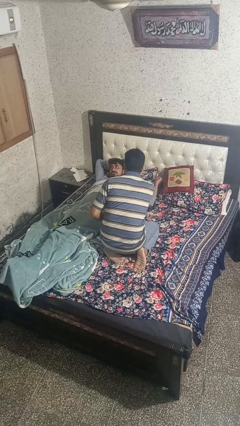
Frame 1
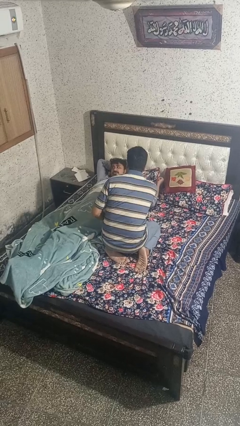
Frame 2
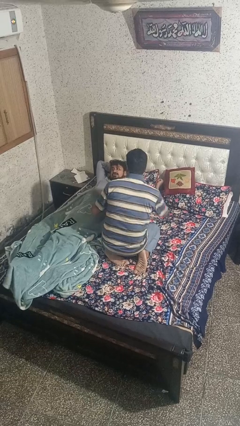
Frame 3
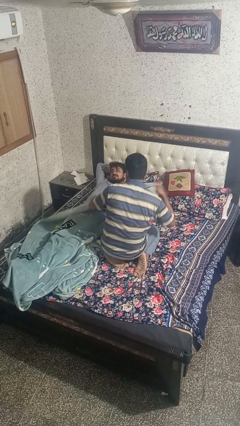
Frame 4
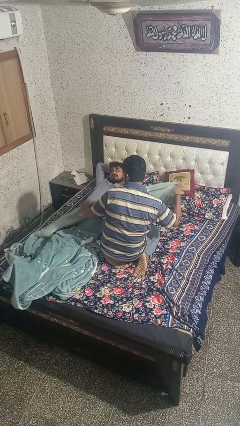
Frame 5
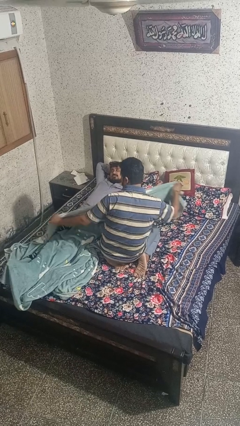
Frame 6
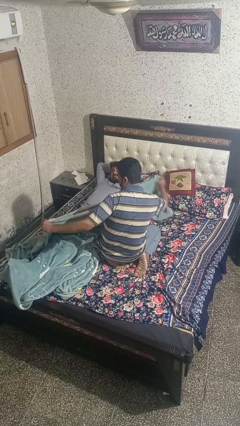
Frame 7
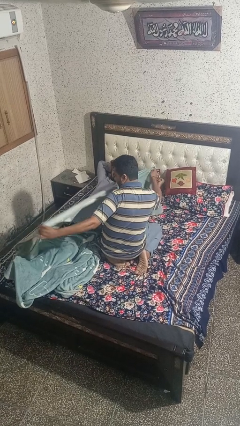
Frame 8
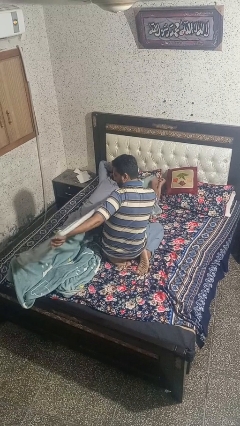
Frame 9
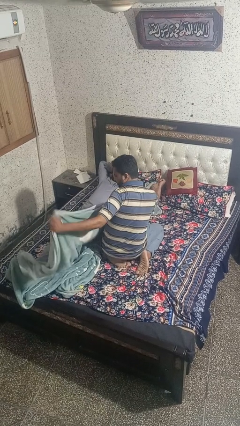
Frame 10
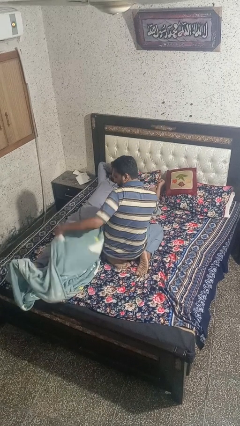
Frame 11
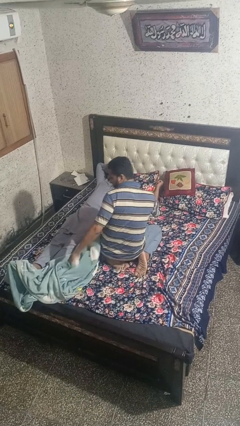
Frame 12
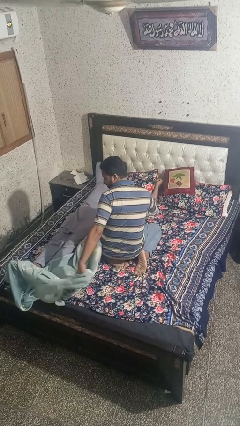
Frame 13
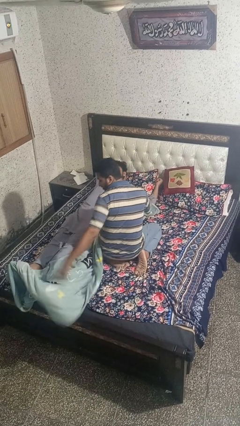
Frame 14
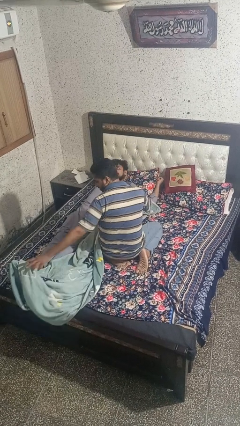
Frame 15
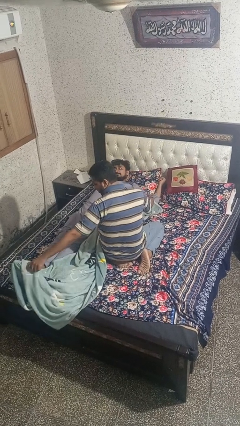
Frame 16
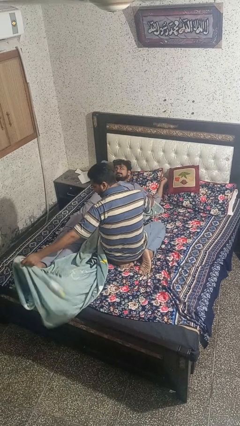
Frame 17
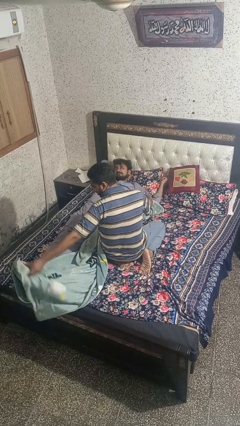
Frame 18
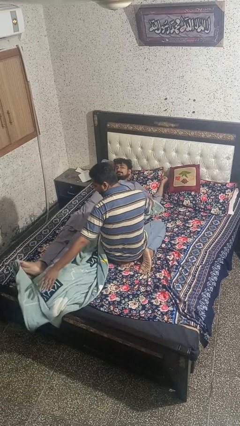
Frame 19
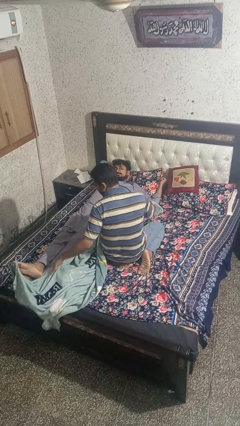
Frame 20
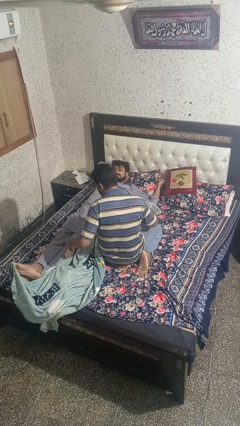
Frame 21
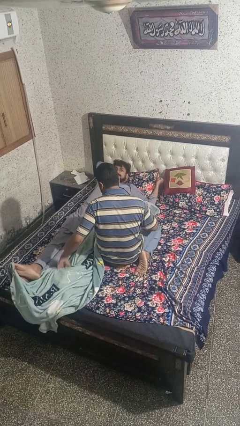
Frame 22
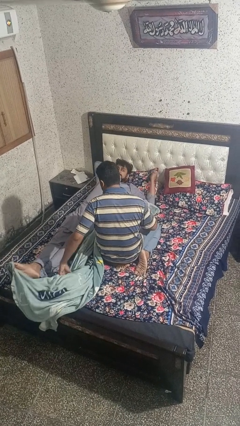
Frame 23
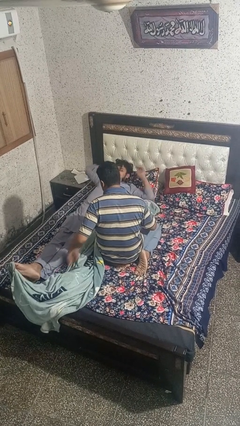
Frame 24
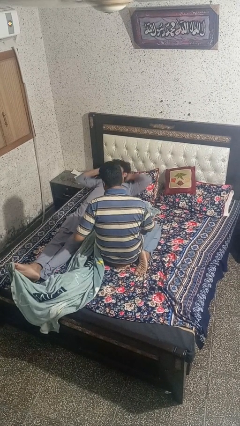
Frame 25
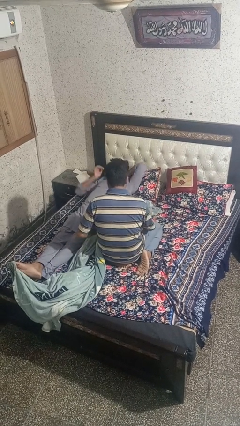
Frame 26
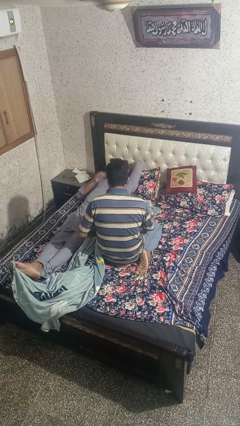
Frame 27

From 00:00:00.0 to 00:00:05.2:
person uncovers friend with blanket

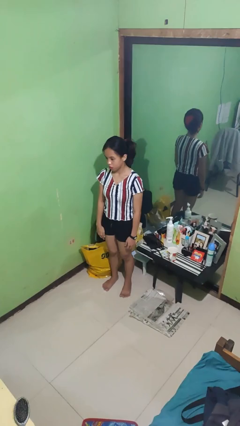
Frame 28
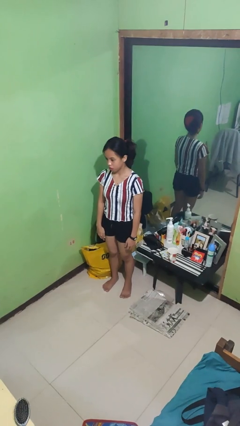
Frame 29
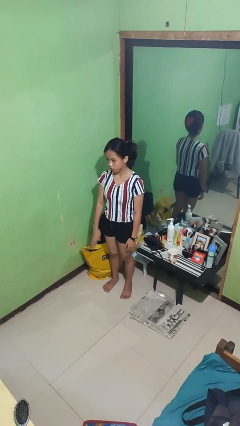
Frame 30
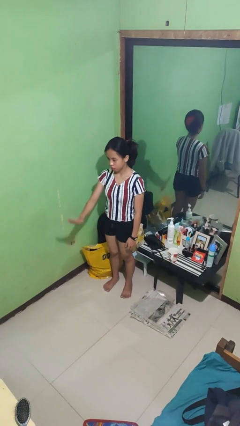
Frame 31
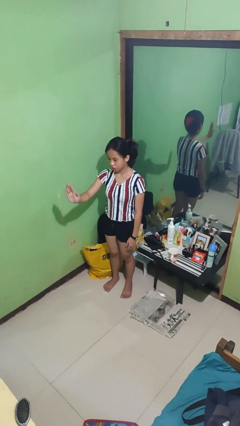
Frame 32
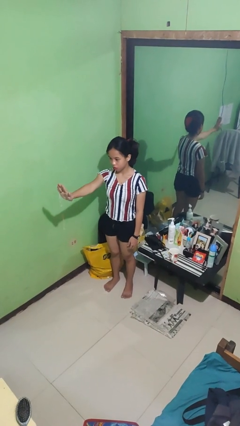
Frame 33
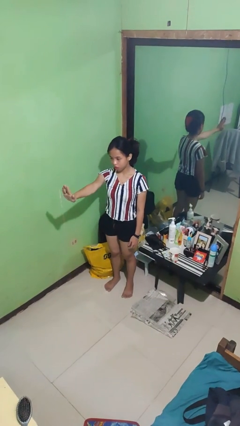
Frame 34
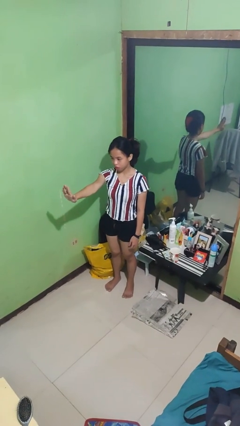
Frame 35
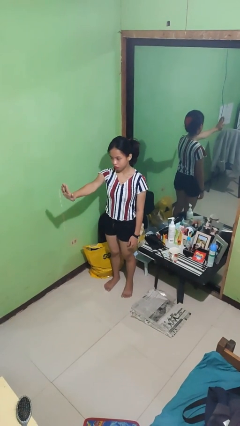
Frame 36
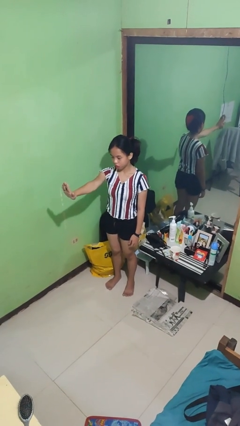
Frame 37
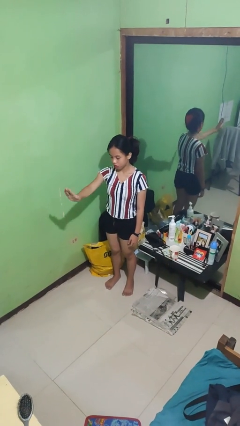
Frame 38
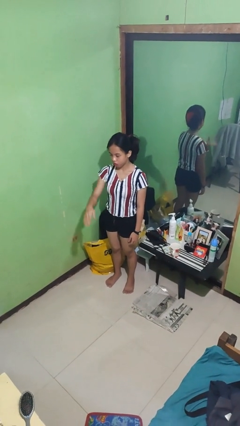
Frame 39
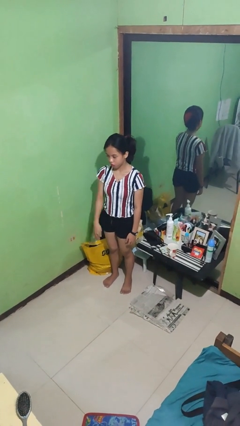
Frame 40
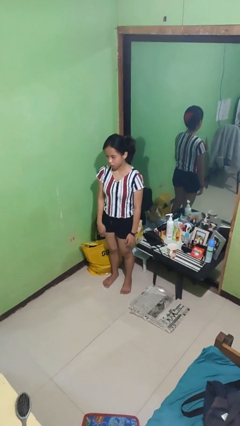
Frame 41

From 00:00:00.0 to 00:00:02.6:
person gestures stop

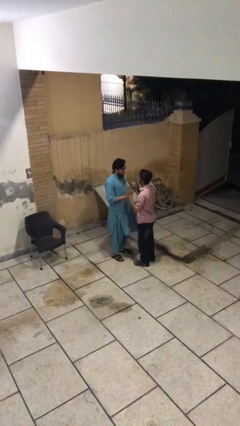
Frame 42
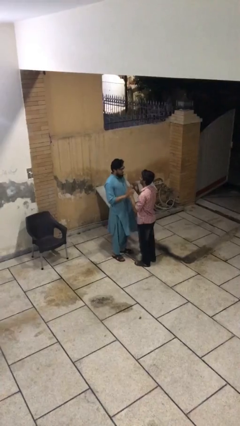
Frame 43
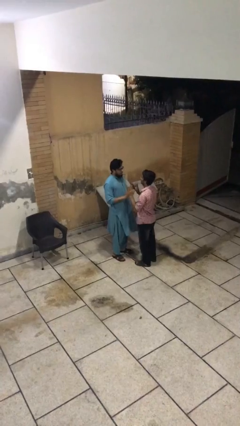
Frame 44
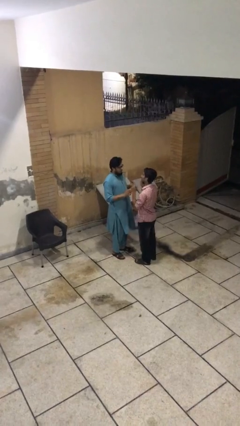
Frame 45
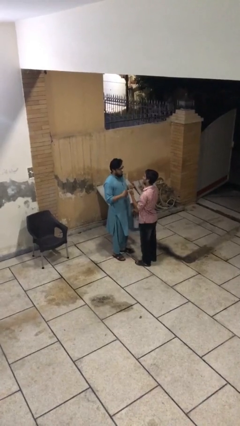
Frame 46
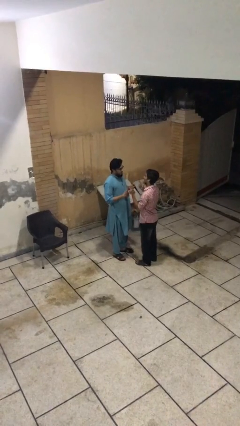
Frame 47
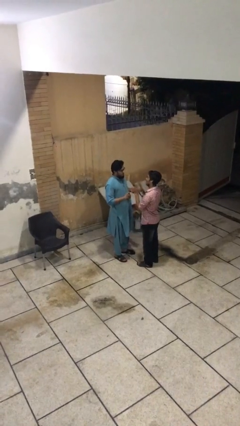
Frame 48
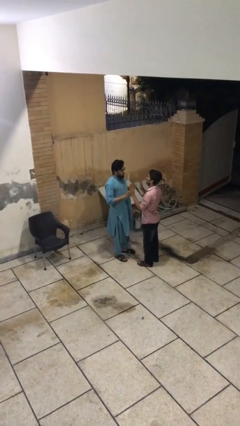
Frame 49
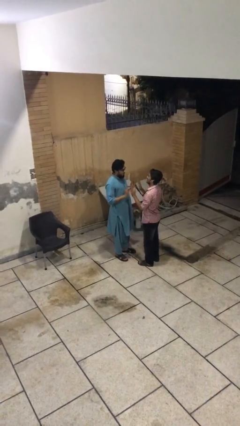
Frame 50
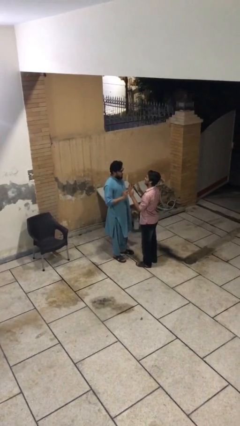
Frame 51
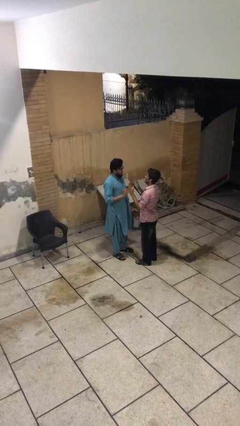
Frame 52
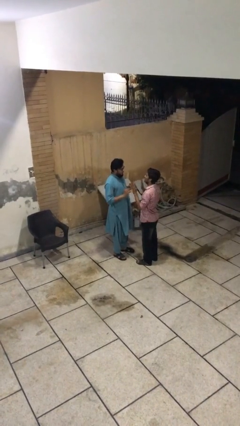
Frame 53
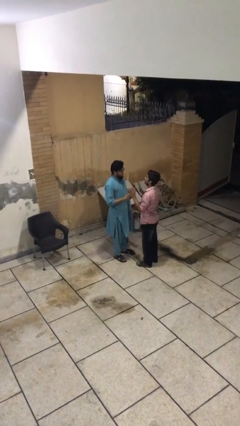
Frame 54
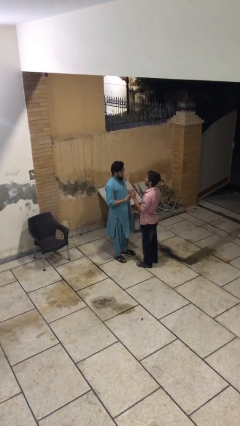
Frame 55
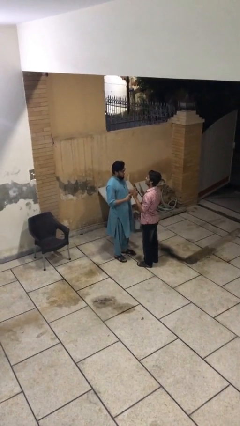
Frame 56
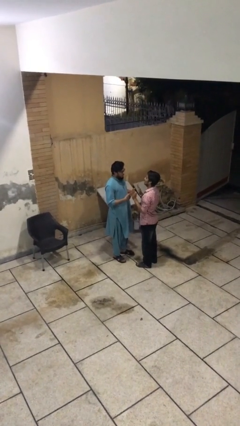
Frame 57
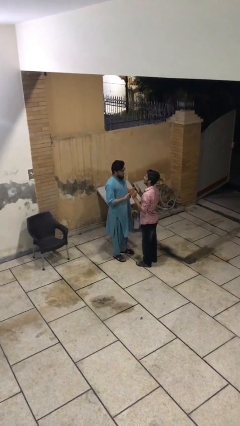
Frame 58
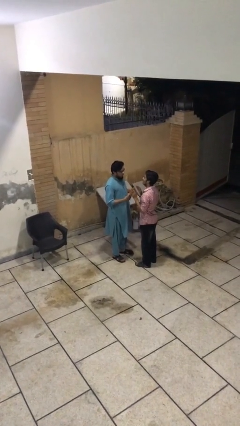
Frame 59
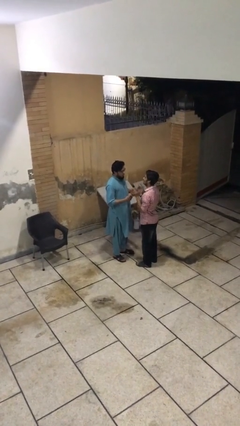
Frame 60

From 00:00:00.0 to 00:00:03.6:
person talks to person

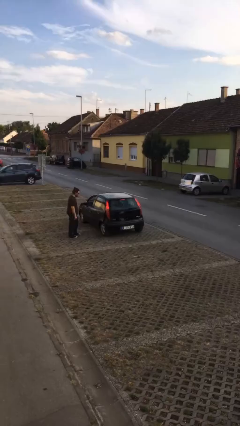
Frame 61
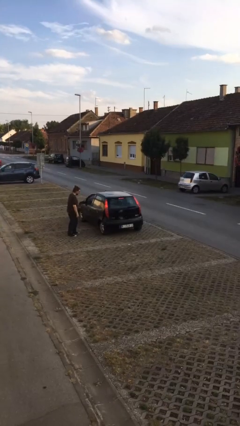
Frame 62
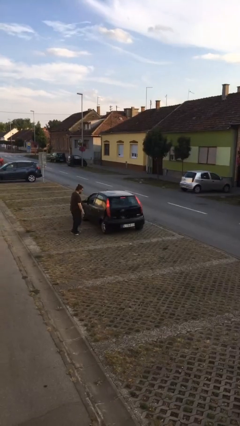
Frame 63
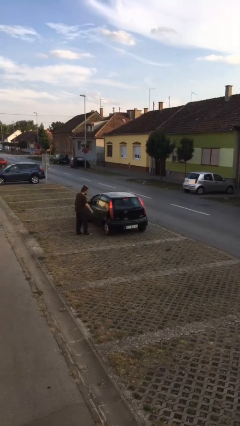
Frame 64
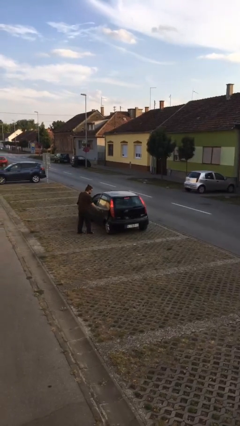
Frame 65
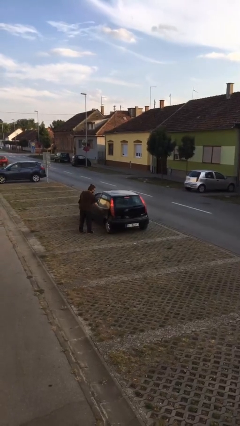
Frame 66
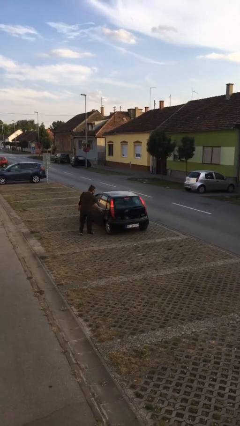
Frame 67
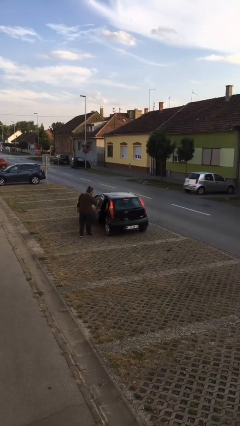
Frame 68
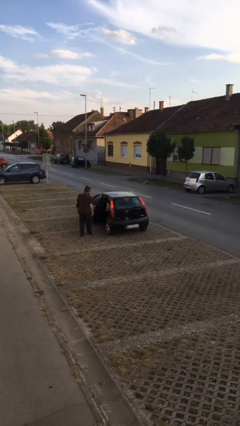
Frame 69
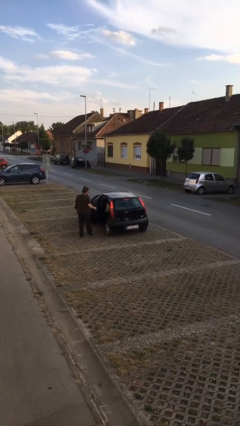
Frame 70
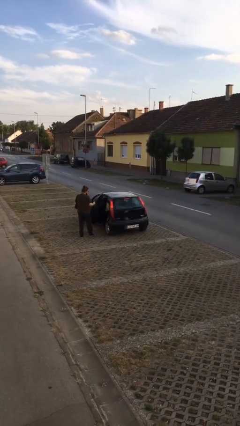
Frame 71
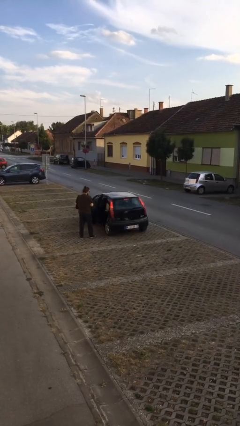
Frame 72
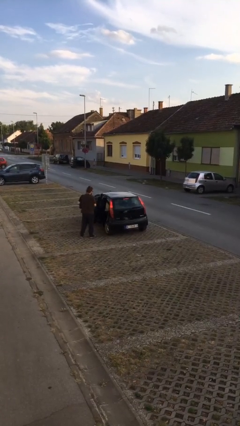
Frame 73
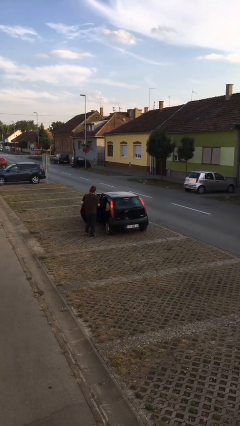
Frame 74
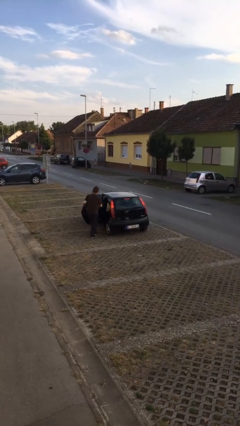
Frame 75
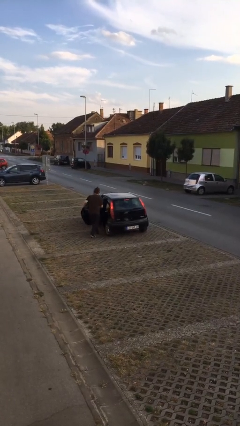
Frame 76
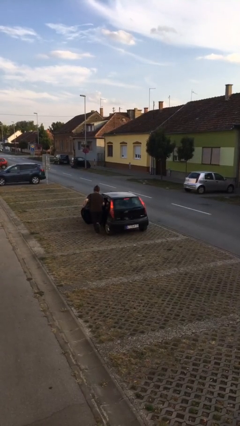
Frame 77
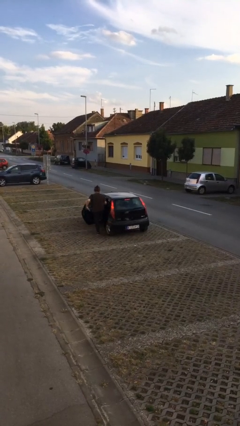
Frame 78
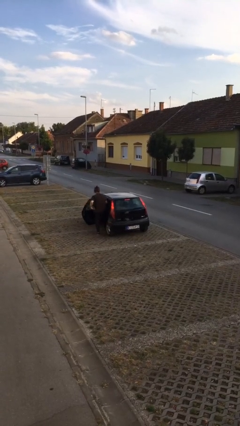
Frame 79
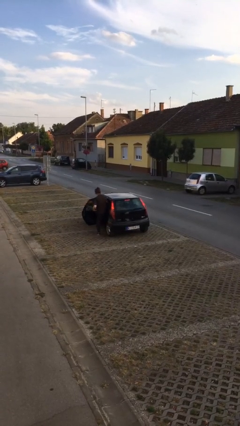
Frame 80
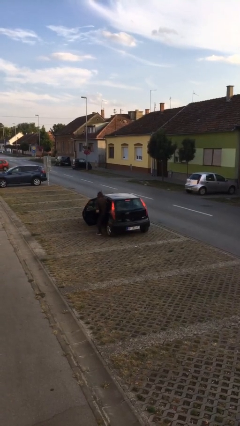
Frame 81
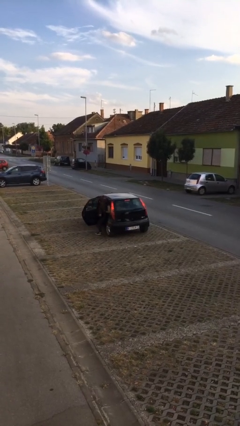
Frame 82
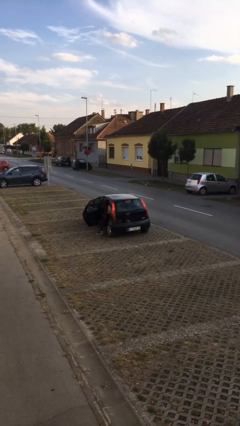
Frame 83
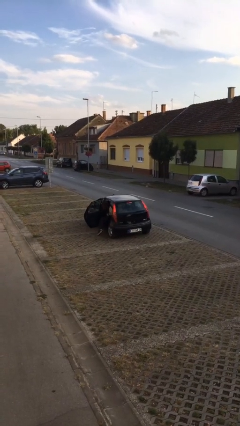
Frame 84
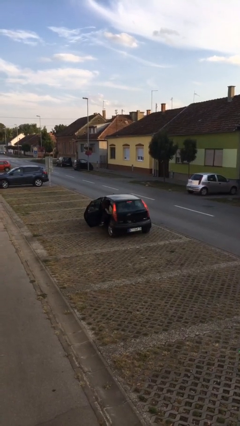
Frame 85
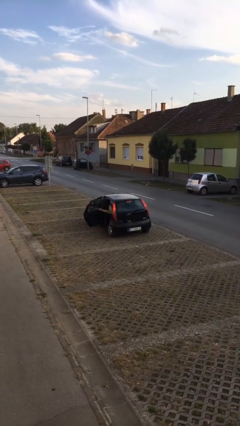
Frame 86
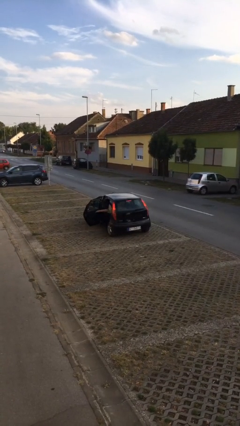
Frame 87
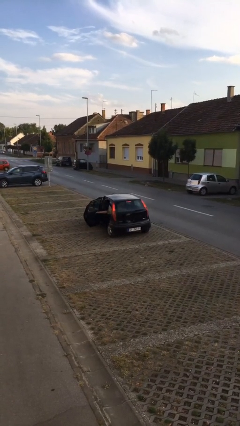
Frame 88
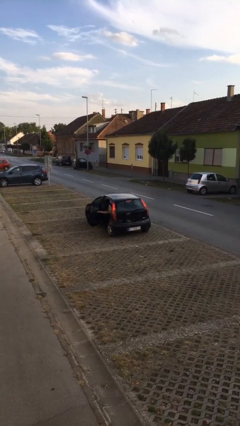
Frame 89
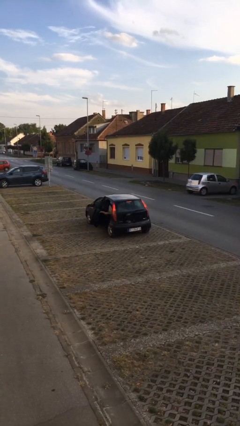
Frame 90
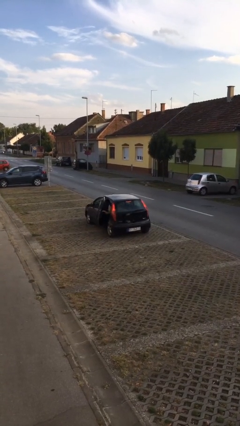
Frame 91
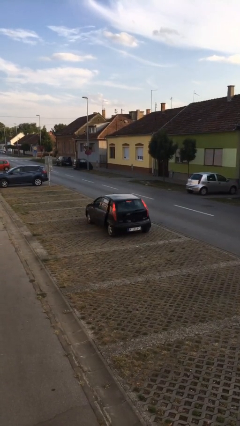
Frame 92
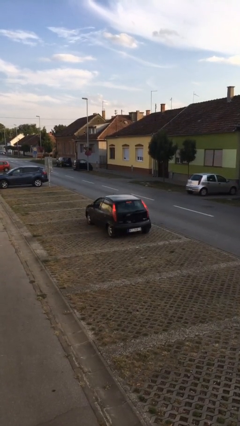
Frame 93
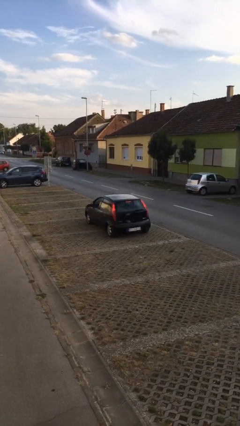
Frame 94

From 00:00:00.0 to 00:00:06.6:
car picks up person
